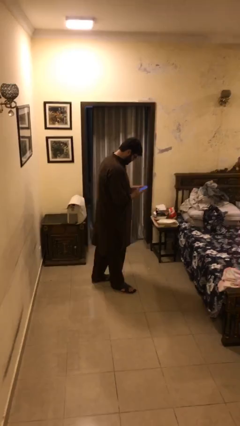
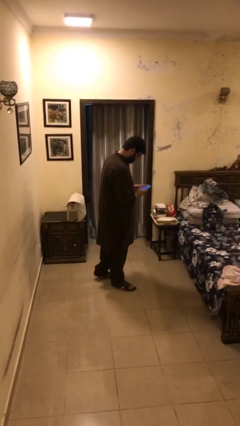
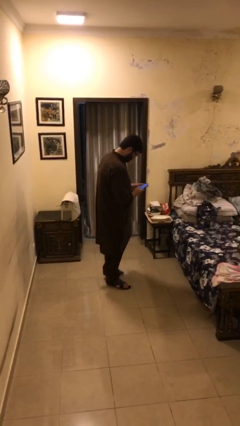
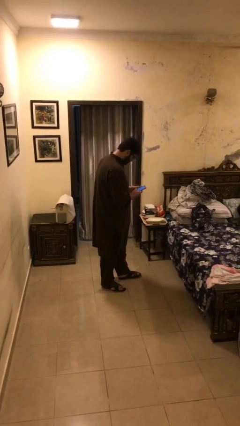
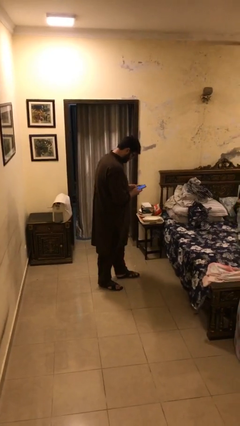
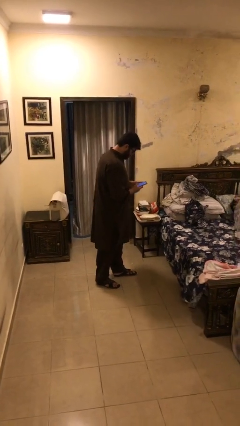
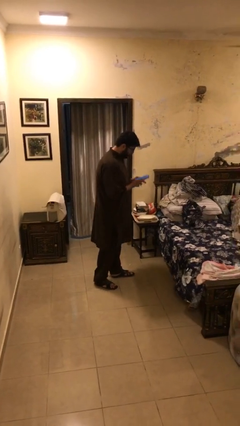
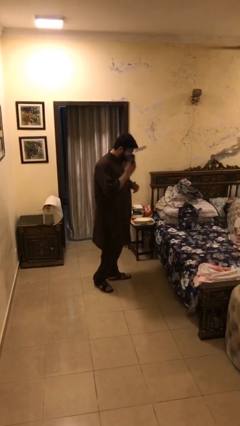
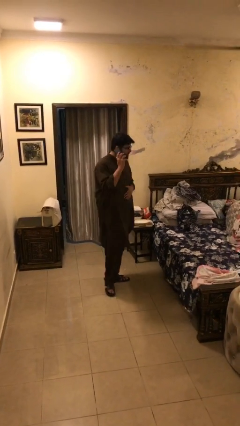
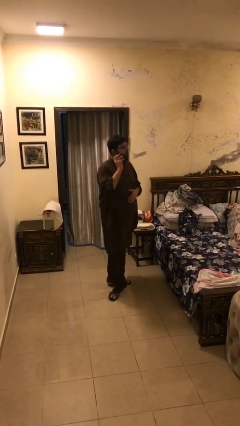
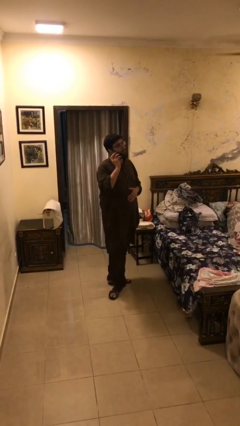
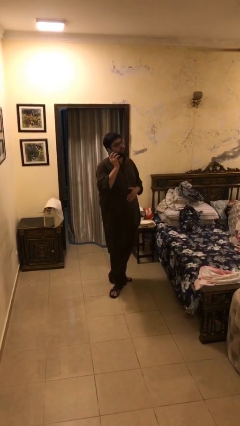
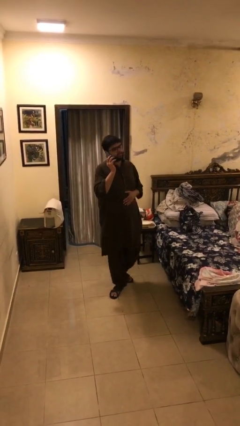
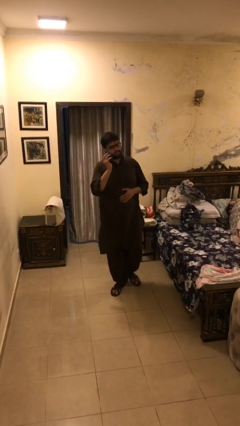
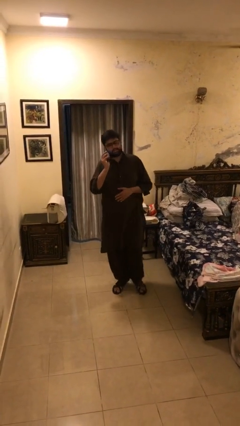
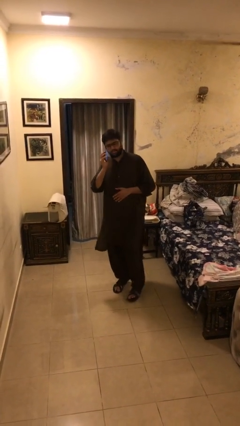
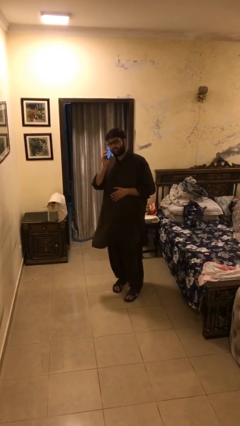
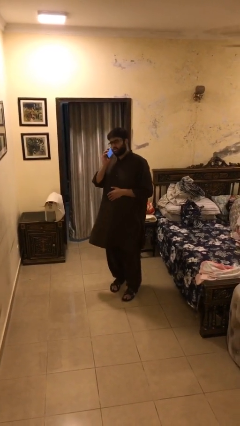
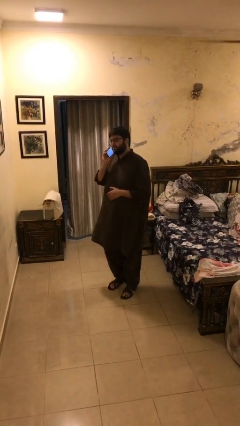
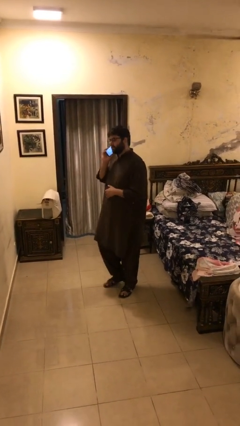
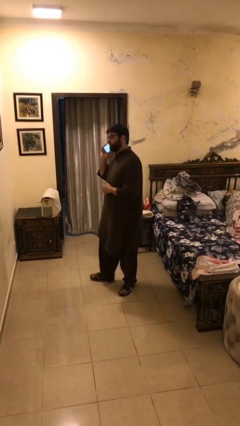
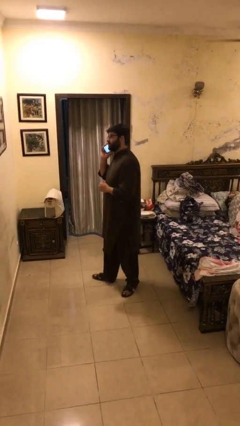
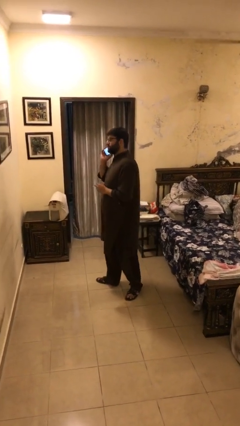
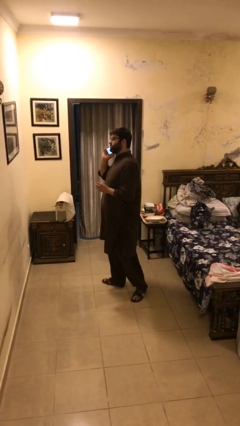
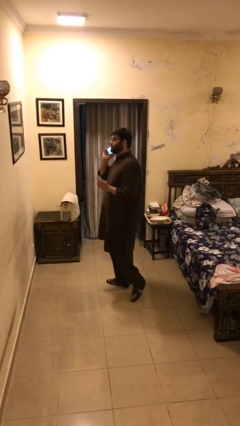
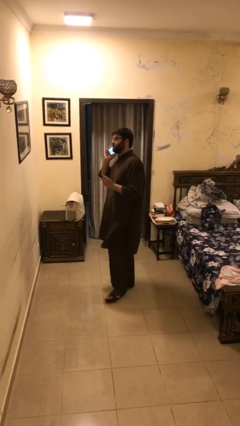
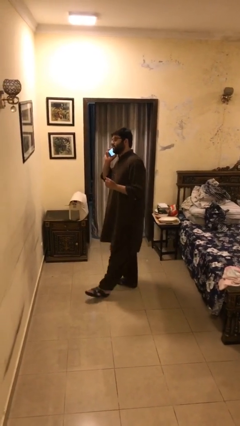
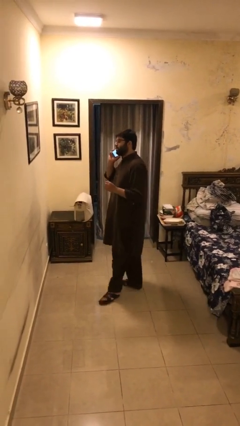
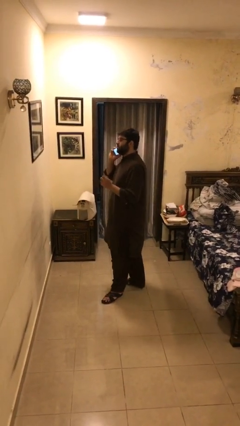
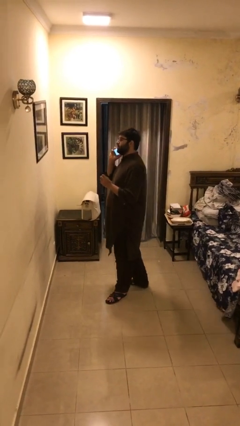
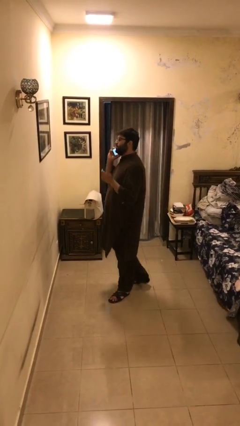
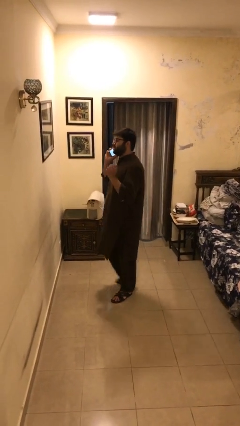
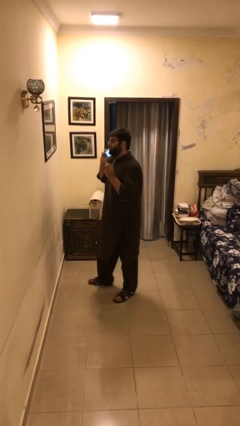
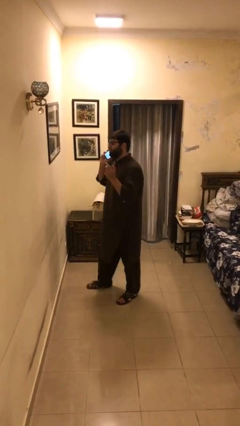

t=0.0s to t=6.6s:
person talks on phone

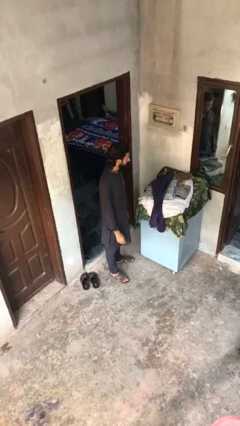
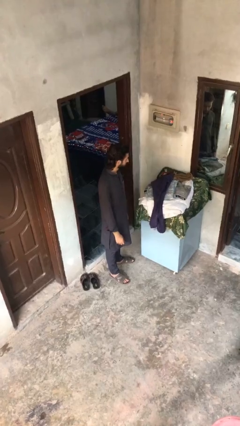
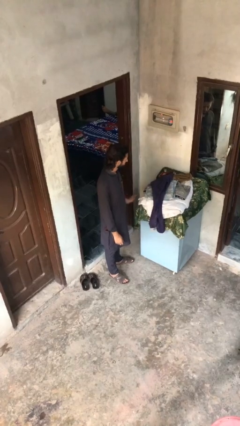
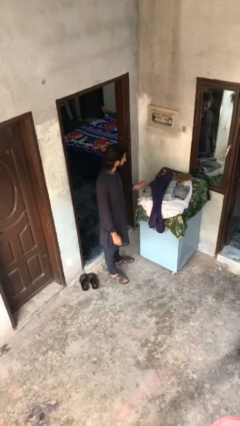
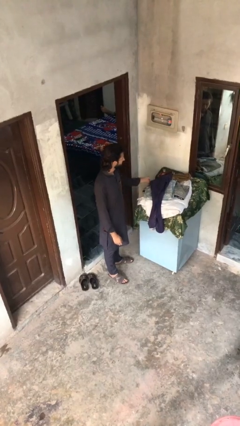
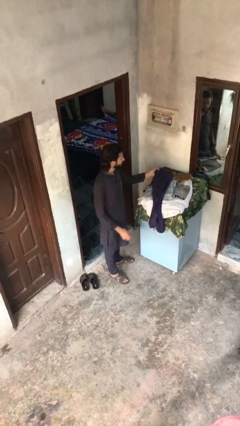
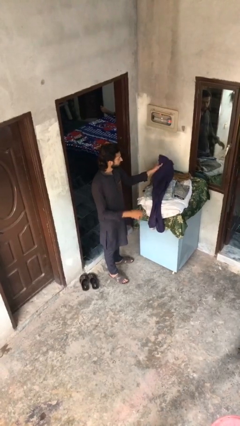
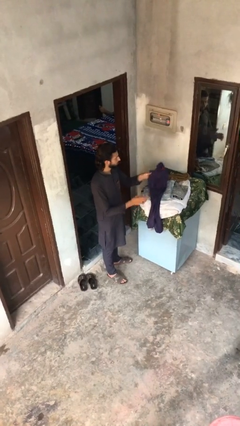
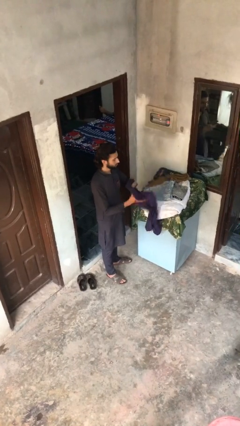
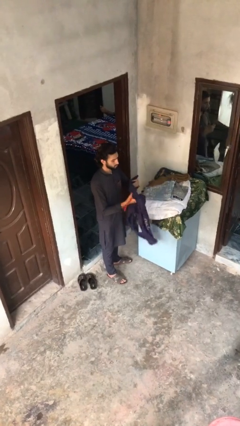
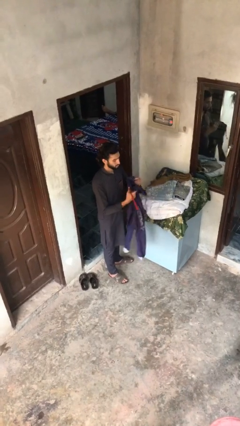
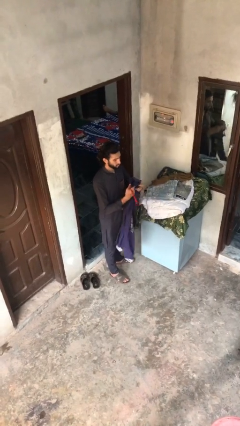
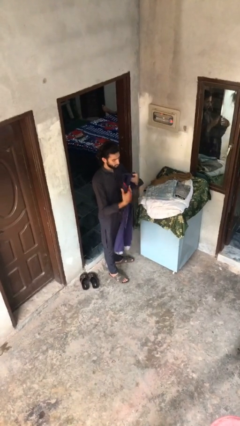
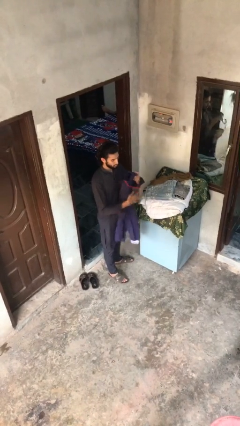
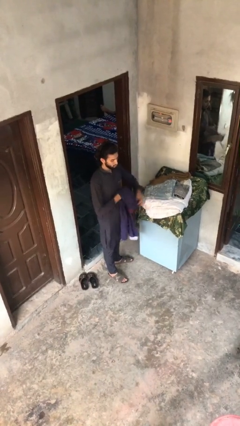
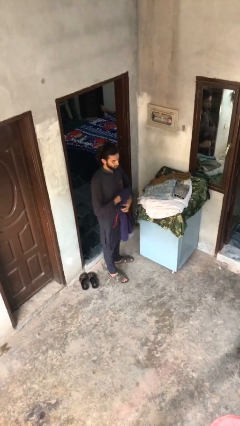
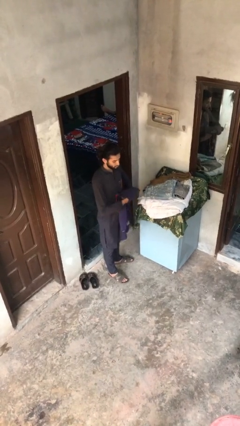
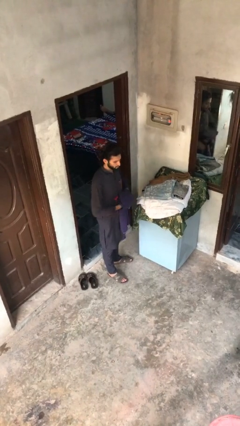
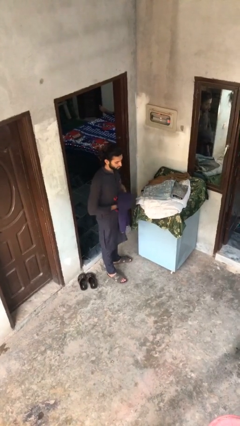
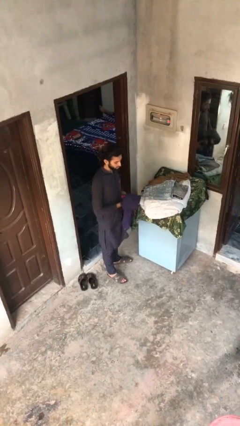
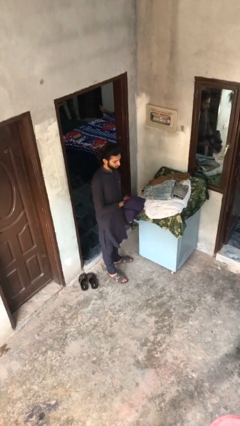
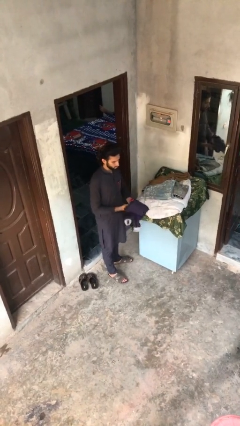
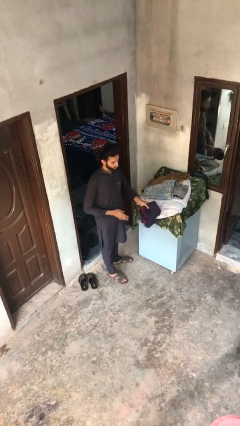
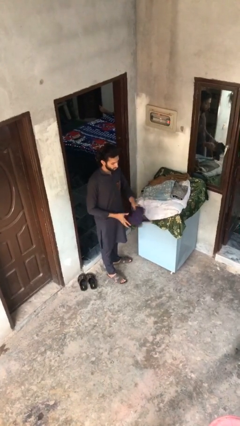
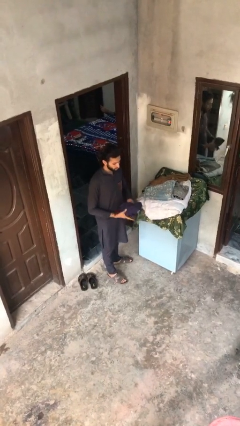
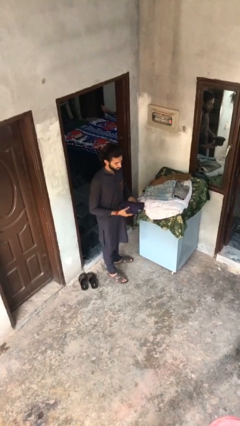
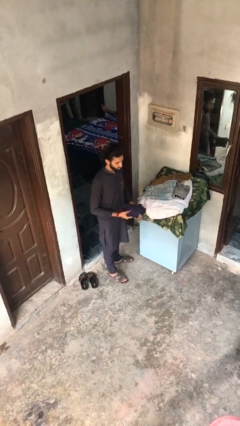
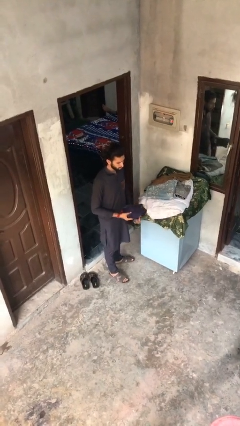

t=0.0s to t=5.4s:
person folds pants

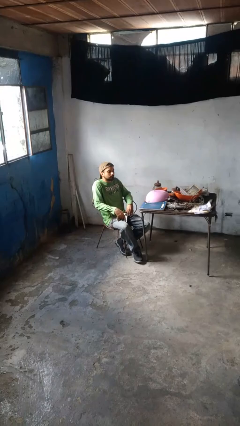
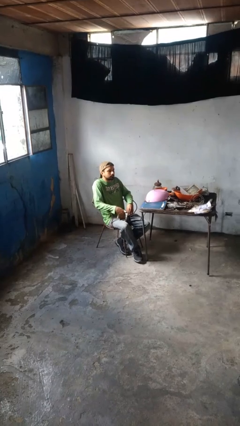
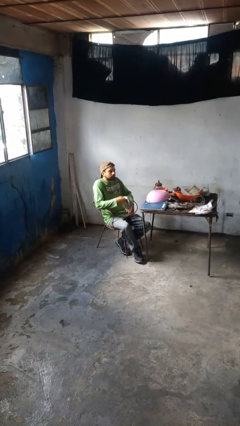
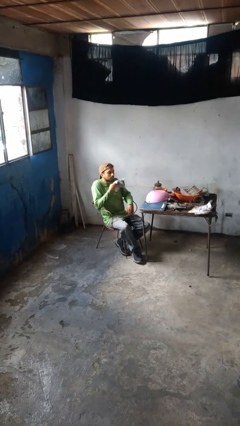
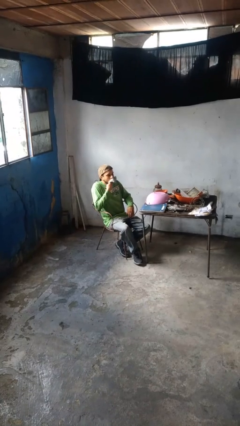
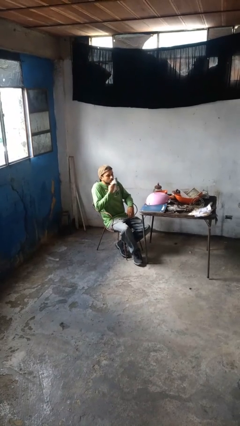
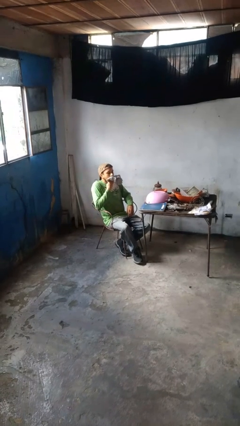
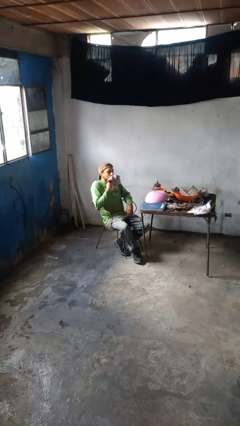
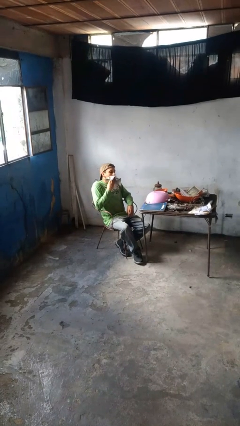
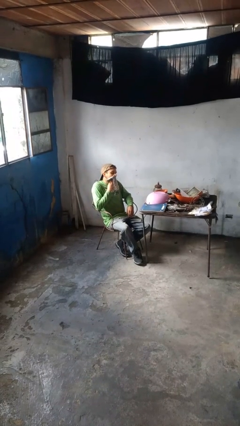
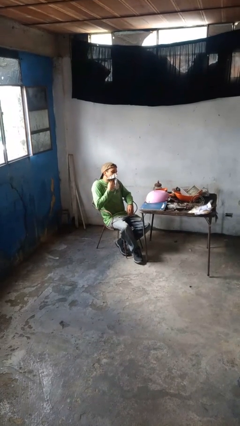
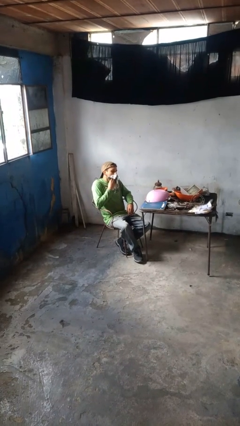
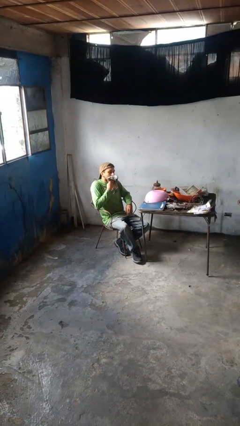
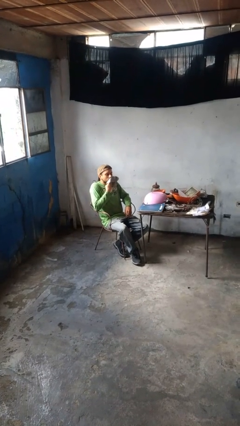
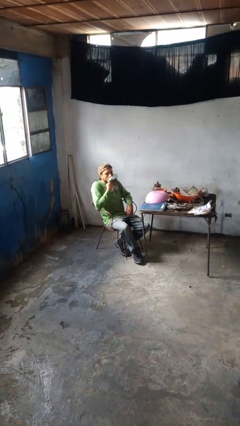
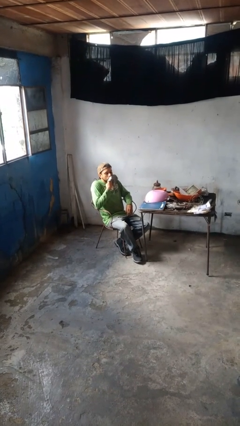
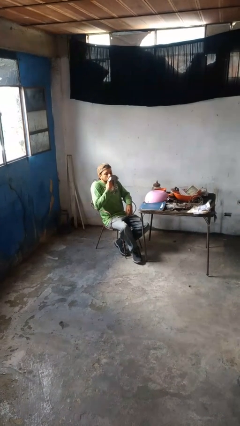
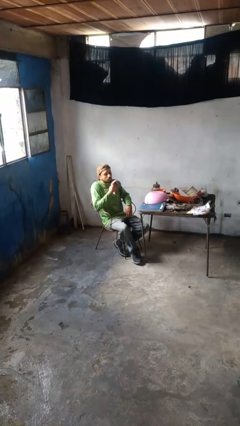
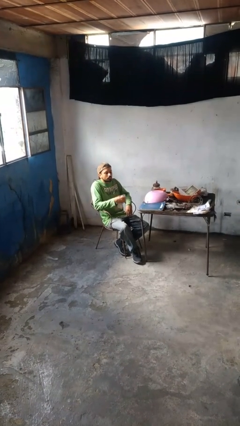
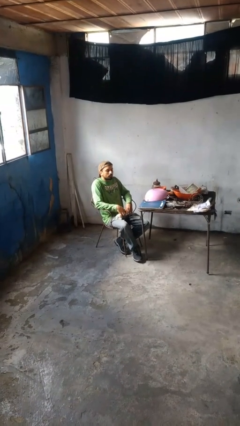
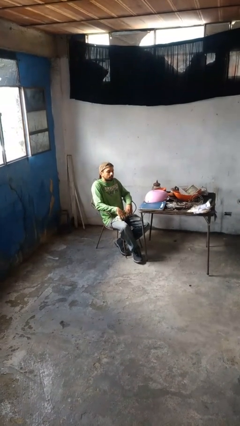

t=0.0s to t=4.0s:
person wipes mouth with napkin

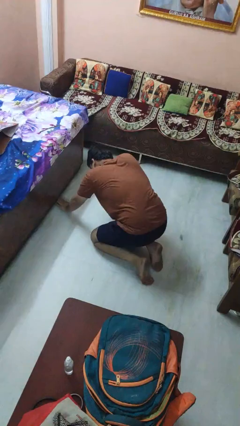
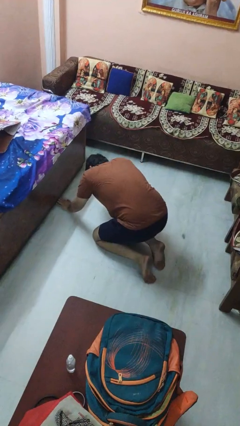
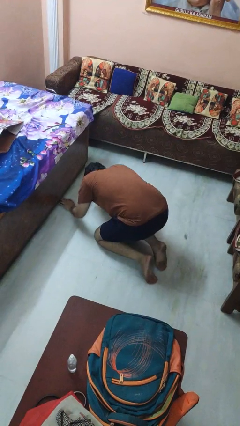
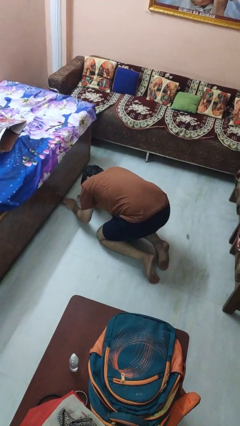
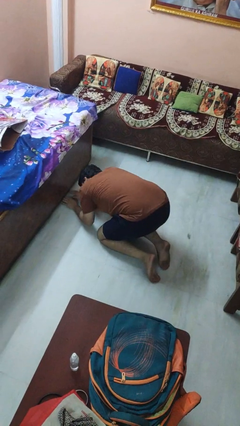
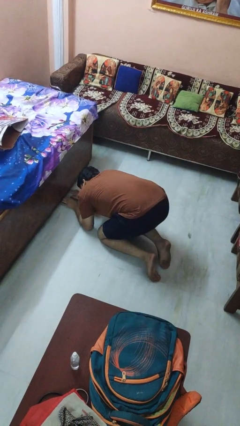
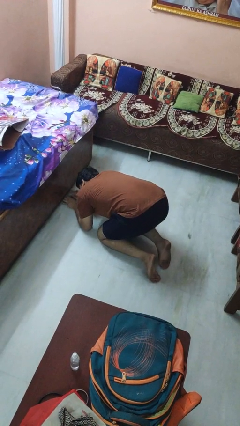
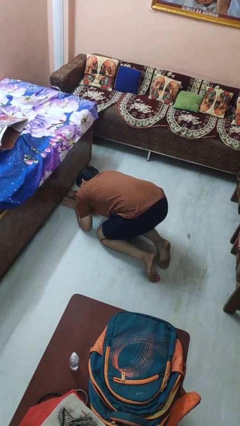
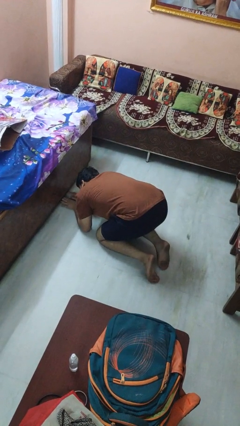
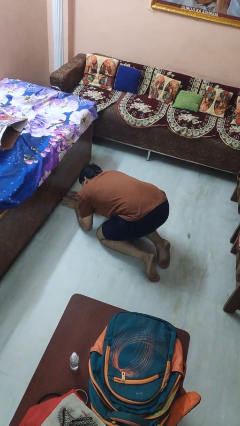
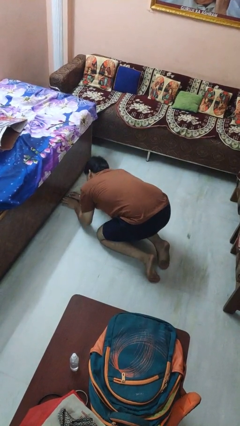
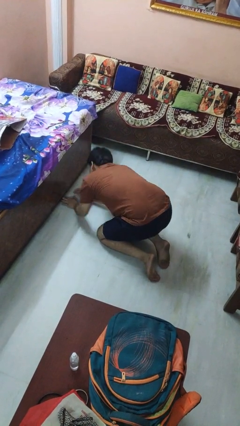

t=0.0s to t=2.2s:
person searches under bed
